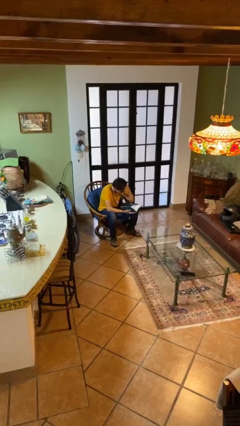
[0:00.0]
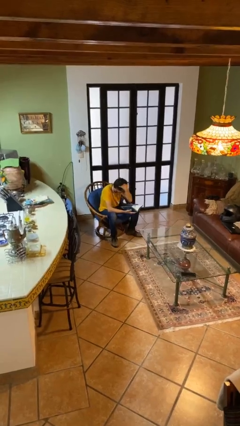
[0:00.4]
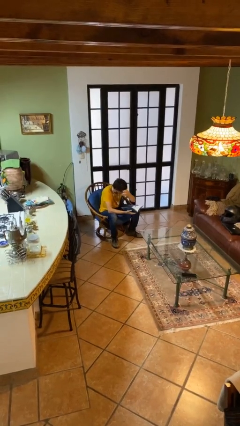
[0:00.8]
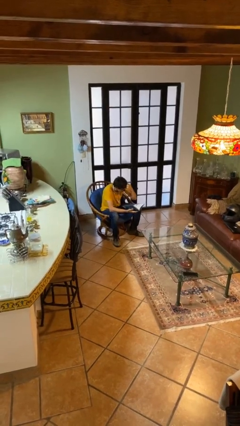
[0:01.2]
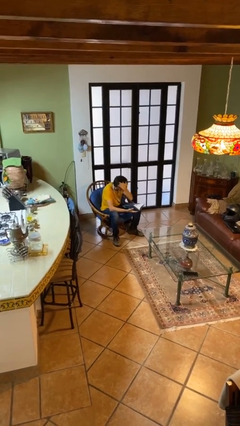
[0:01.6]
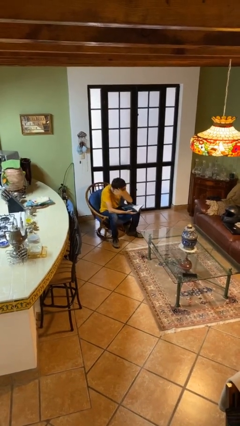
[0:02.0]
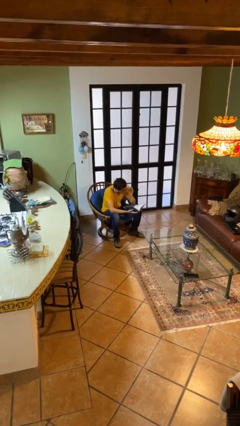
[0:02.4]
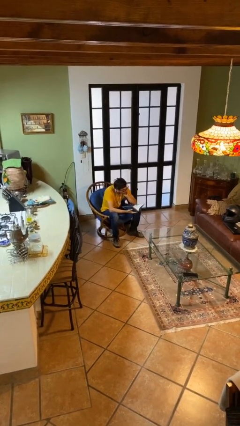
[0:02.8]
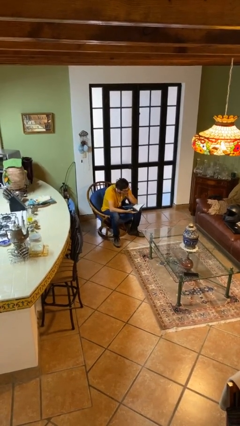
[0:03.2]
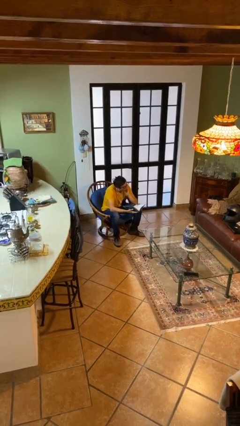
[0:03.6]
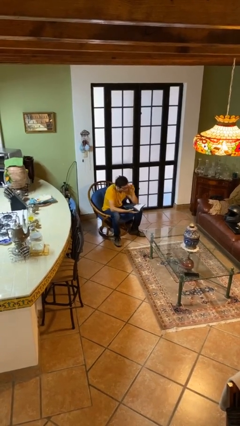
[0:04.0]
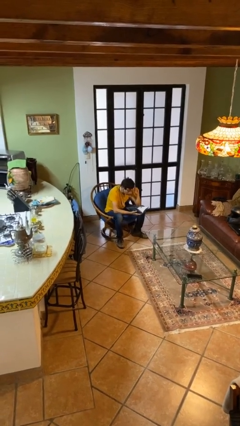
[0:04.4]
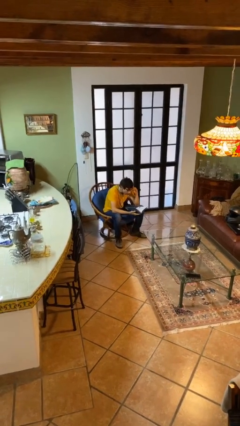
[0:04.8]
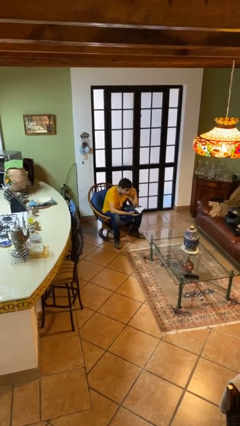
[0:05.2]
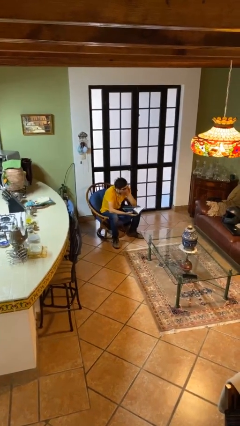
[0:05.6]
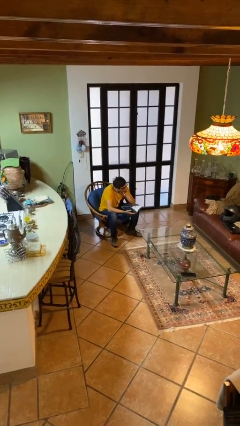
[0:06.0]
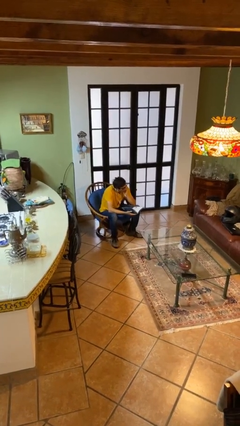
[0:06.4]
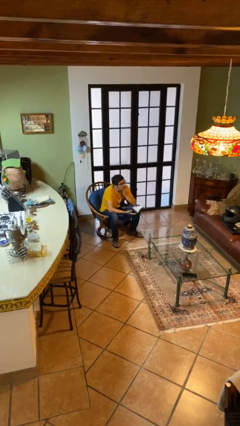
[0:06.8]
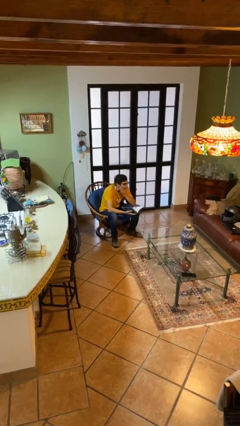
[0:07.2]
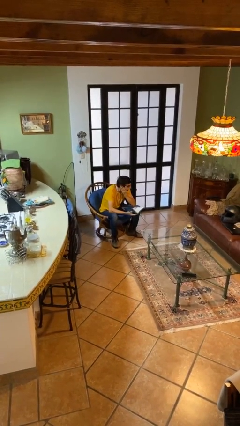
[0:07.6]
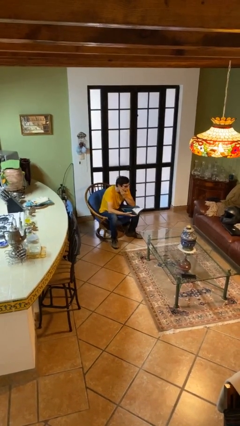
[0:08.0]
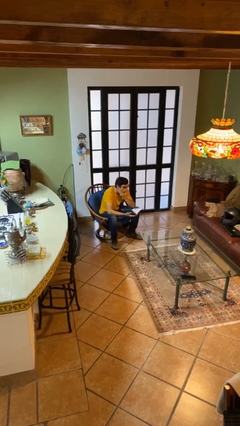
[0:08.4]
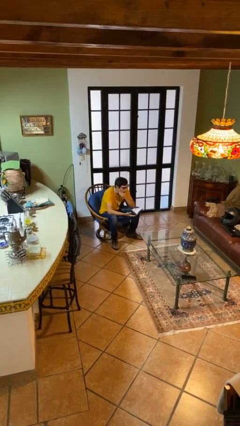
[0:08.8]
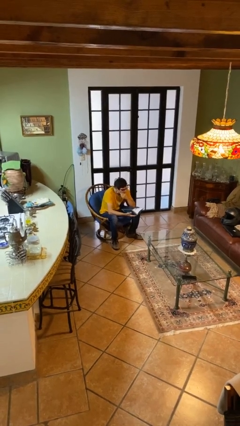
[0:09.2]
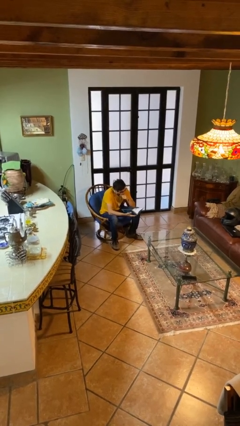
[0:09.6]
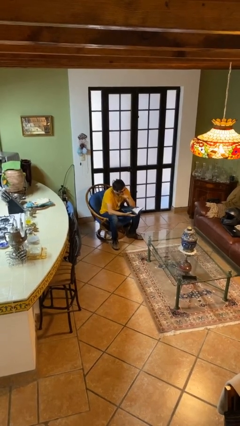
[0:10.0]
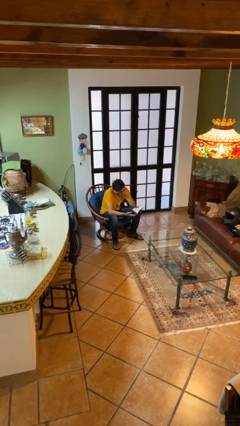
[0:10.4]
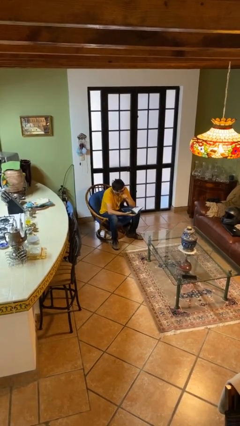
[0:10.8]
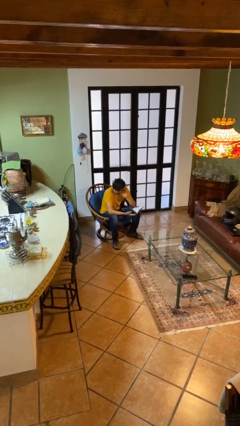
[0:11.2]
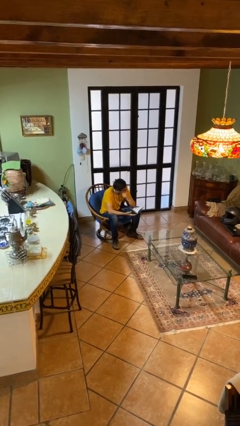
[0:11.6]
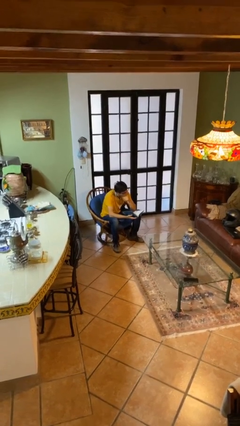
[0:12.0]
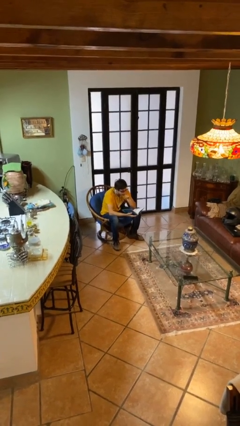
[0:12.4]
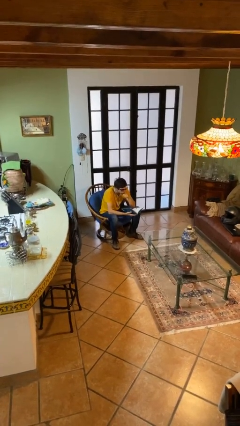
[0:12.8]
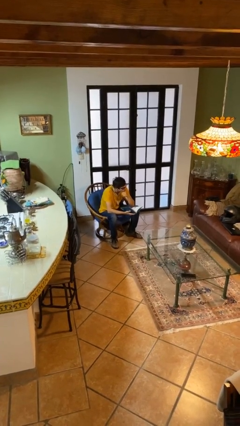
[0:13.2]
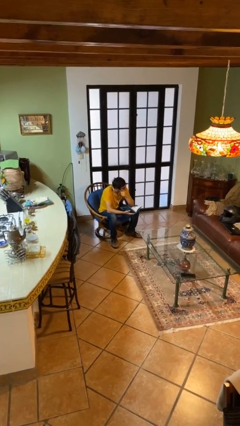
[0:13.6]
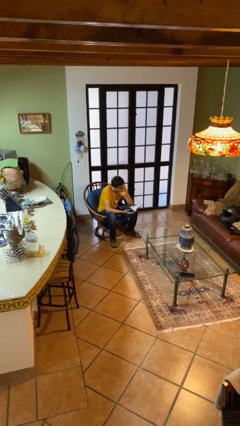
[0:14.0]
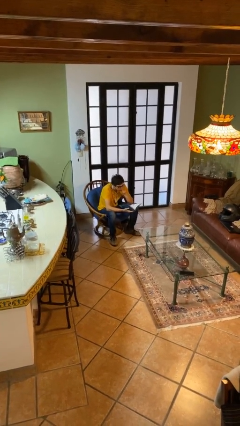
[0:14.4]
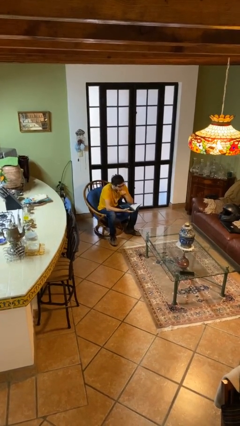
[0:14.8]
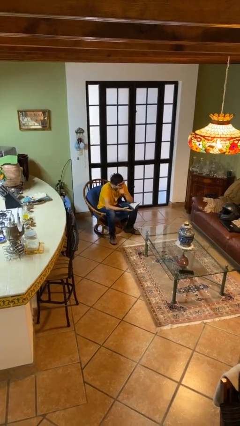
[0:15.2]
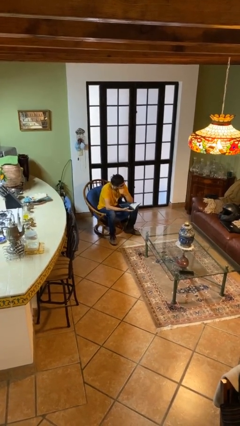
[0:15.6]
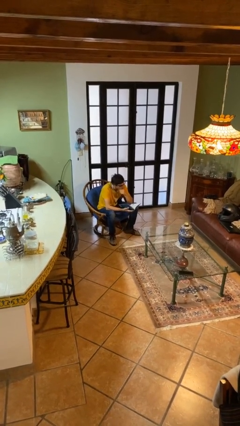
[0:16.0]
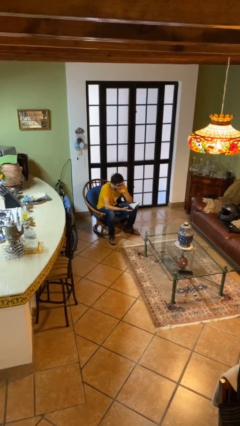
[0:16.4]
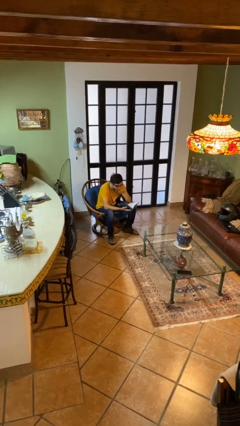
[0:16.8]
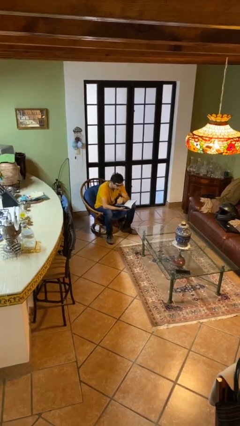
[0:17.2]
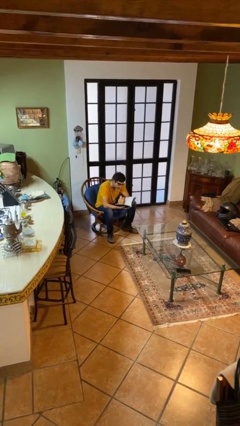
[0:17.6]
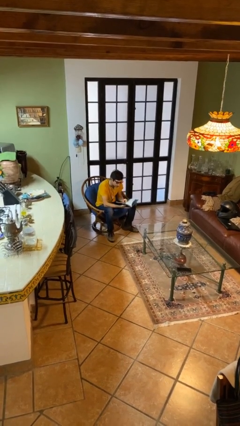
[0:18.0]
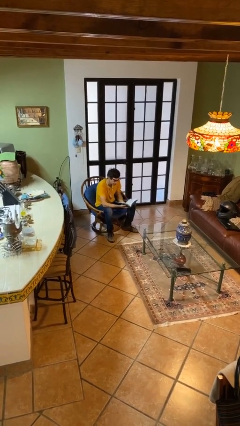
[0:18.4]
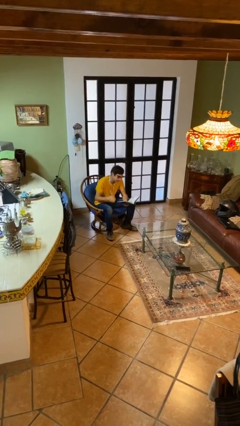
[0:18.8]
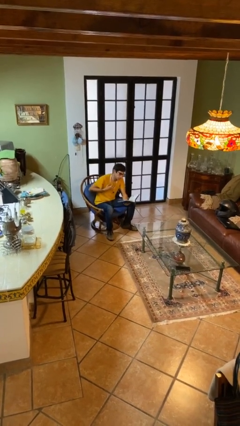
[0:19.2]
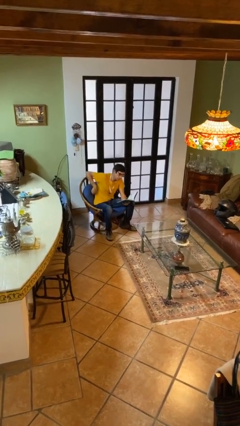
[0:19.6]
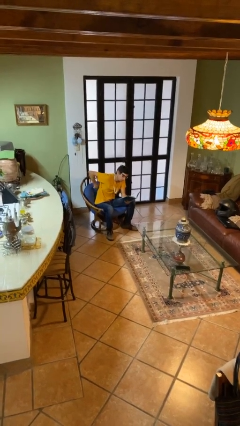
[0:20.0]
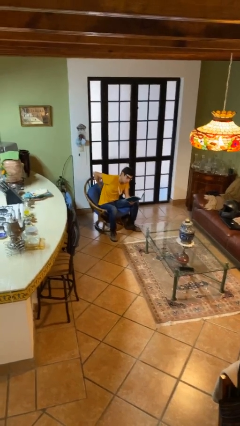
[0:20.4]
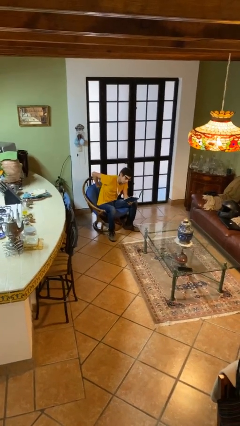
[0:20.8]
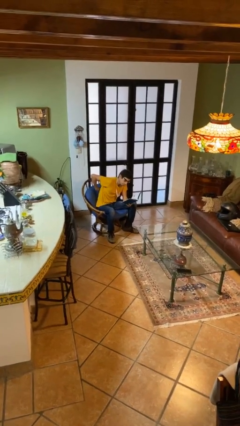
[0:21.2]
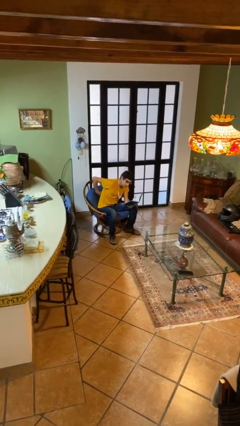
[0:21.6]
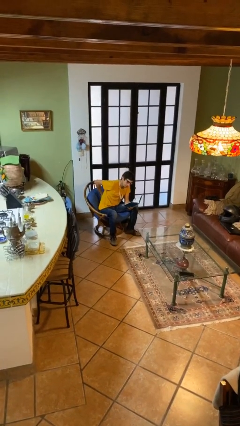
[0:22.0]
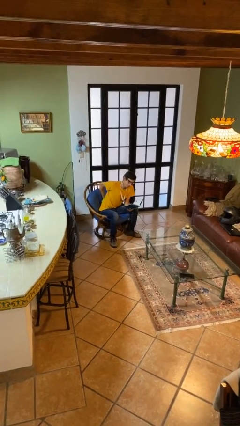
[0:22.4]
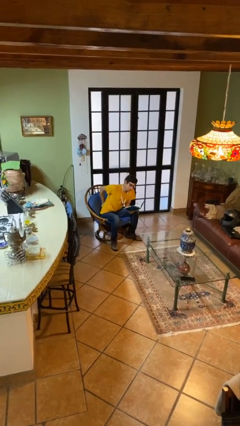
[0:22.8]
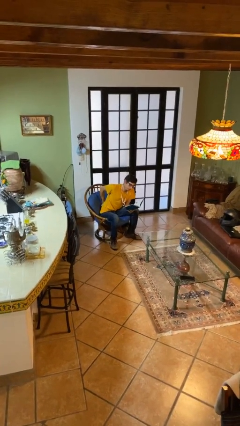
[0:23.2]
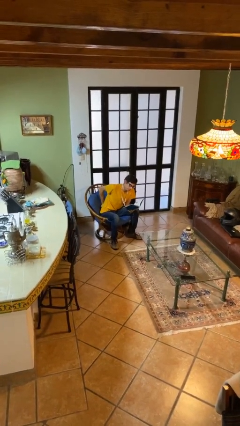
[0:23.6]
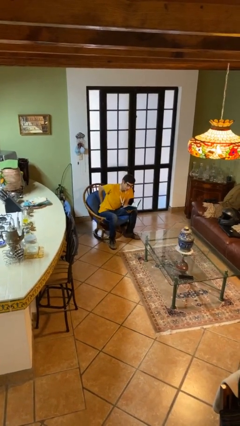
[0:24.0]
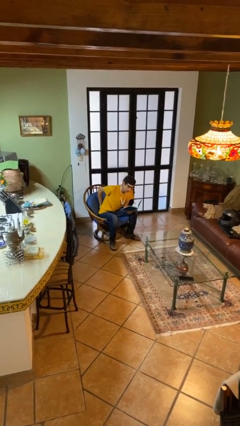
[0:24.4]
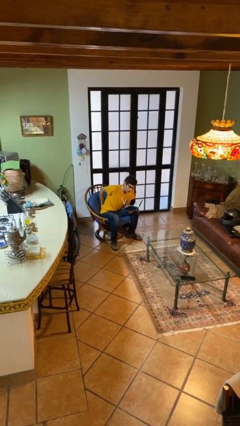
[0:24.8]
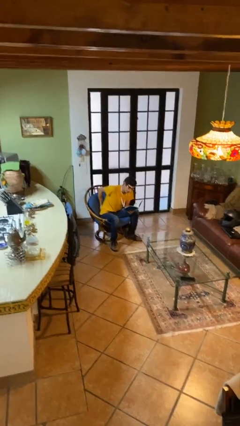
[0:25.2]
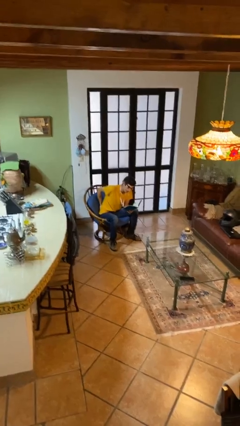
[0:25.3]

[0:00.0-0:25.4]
person reads document

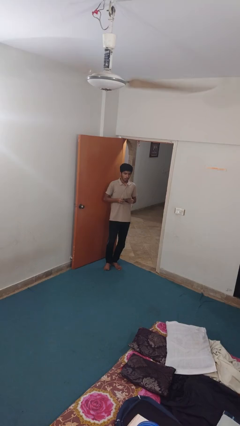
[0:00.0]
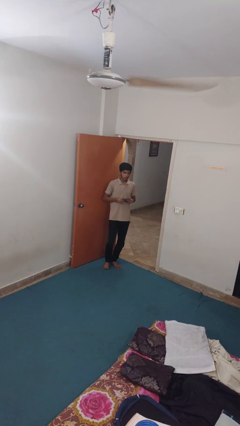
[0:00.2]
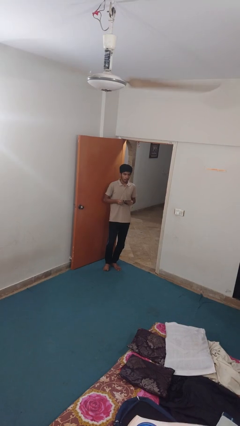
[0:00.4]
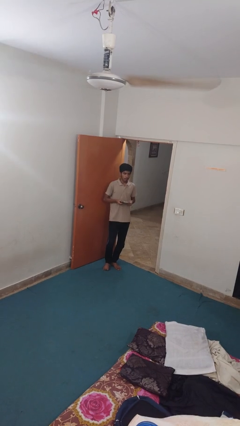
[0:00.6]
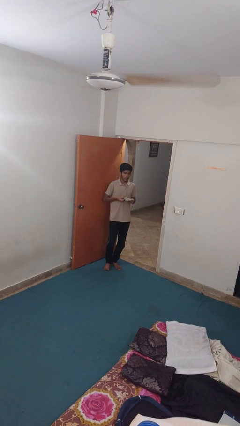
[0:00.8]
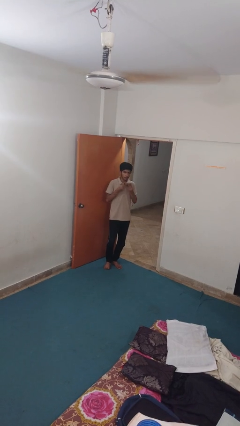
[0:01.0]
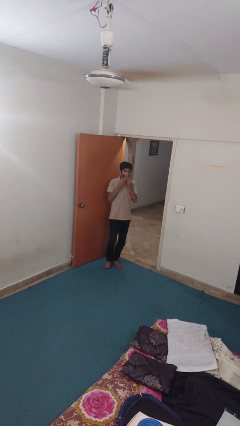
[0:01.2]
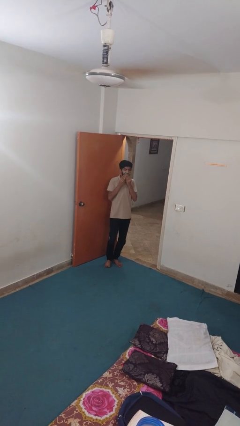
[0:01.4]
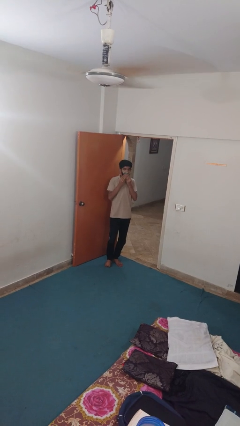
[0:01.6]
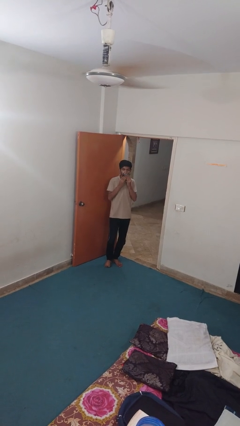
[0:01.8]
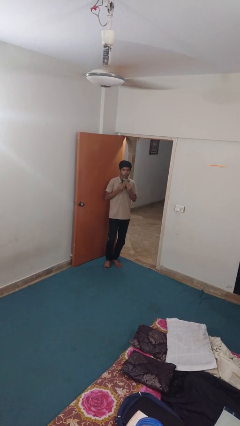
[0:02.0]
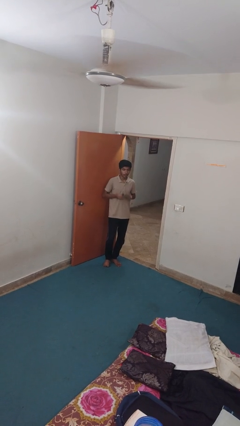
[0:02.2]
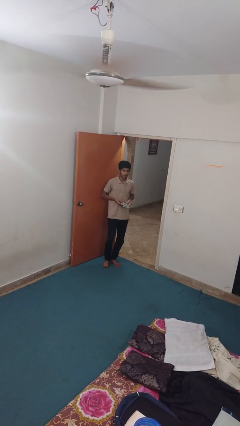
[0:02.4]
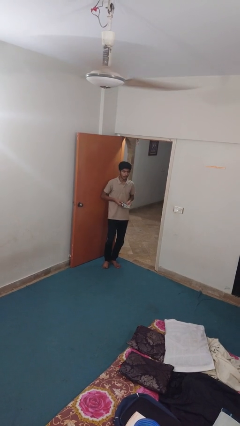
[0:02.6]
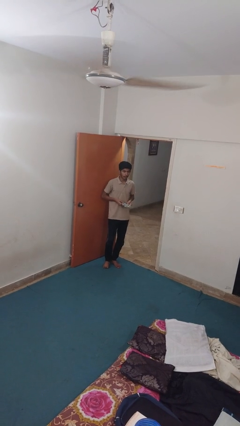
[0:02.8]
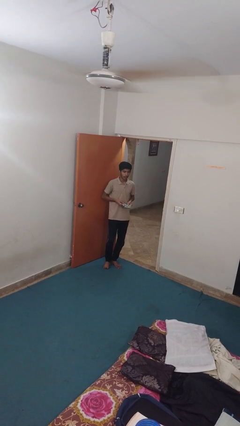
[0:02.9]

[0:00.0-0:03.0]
person wipes mouth with napkin

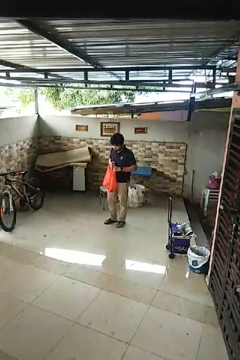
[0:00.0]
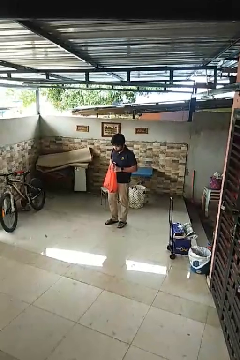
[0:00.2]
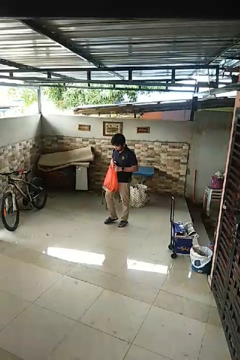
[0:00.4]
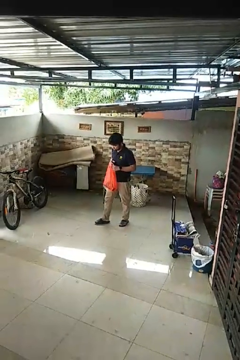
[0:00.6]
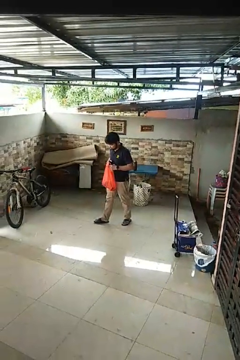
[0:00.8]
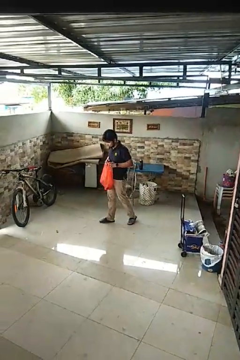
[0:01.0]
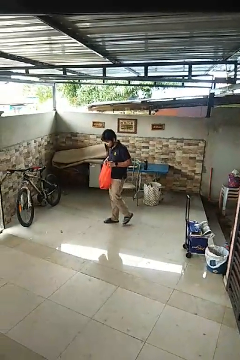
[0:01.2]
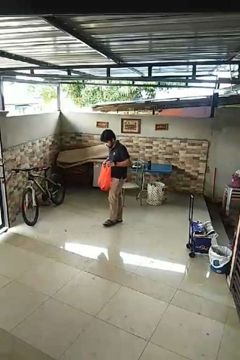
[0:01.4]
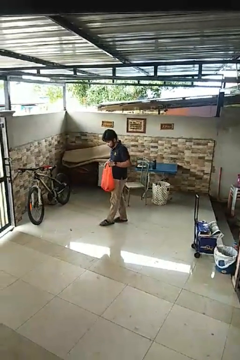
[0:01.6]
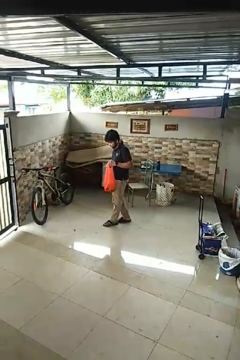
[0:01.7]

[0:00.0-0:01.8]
person carries groceries

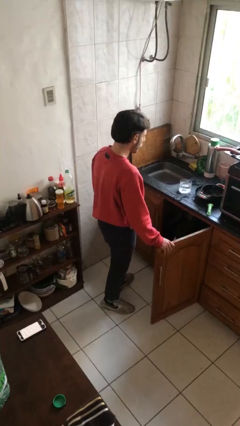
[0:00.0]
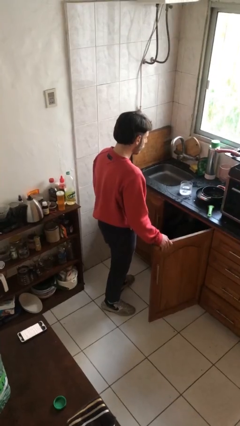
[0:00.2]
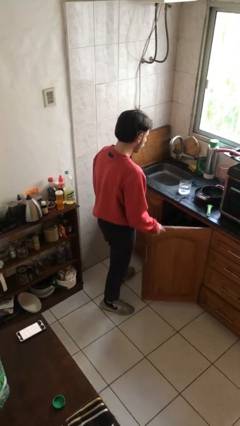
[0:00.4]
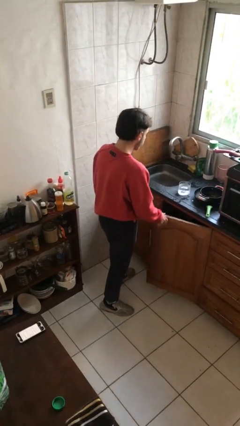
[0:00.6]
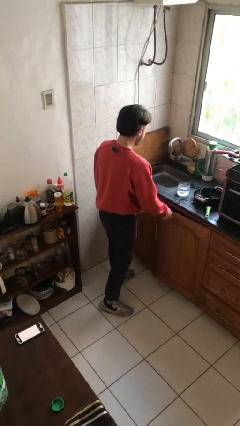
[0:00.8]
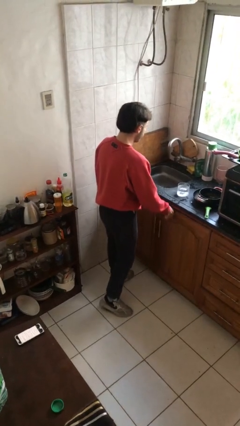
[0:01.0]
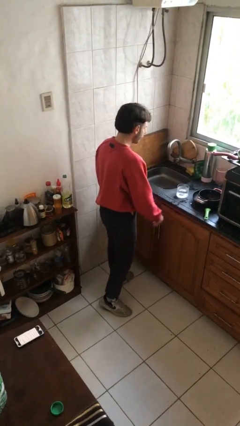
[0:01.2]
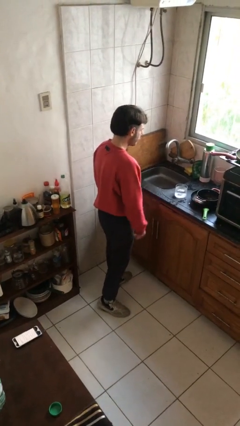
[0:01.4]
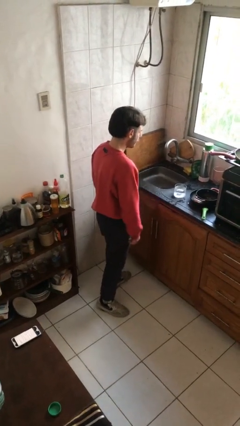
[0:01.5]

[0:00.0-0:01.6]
person closes cabinet
